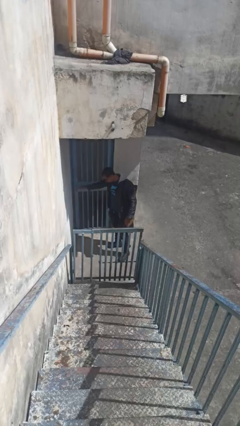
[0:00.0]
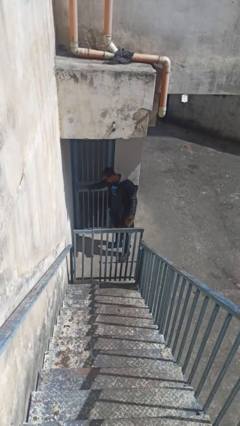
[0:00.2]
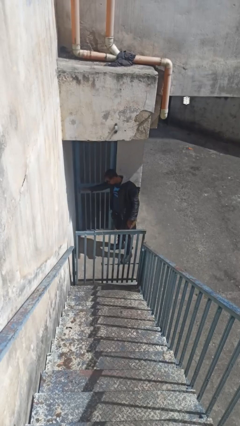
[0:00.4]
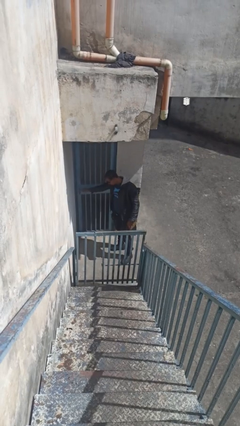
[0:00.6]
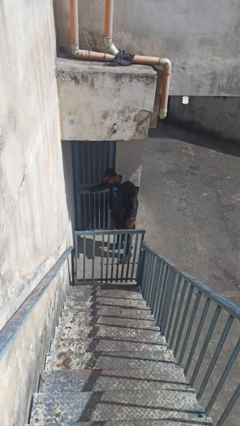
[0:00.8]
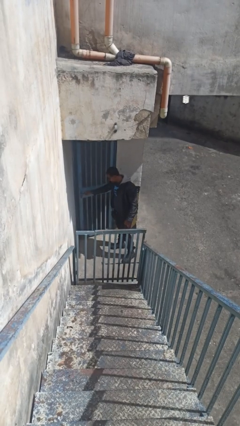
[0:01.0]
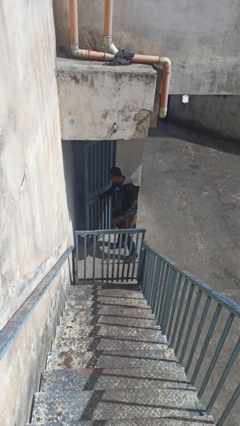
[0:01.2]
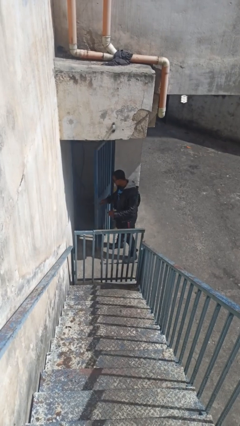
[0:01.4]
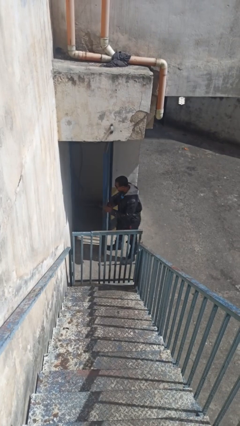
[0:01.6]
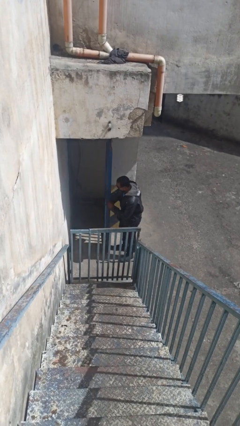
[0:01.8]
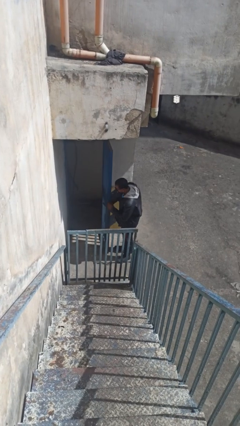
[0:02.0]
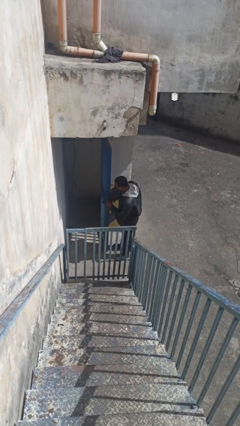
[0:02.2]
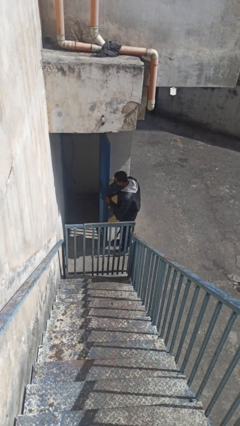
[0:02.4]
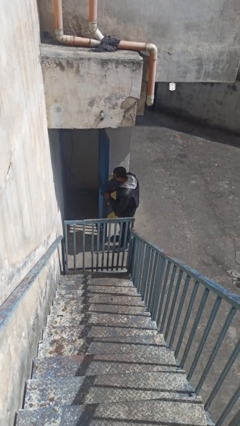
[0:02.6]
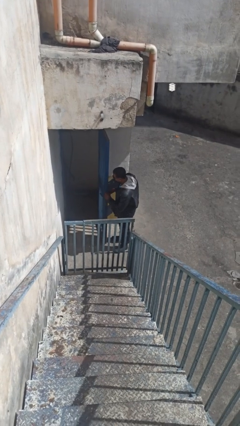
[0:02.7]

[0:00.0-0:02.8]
person opens facility door

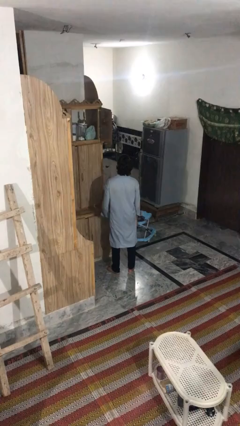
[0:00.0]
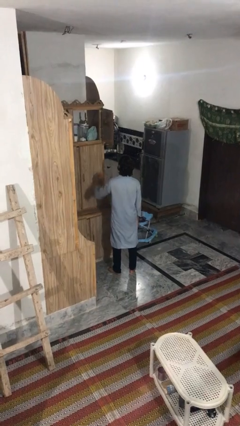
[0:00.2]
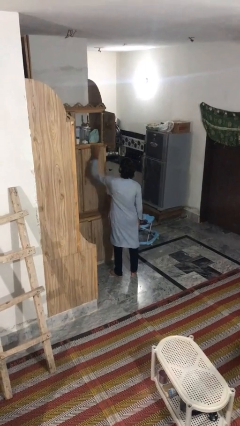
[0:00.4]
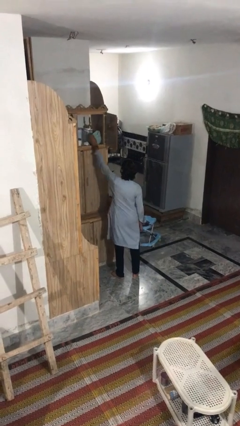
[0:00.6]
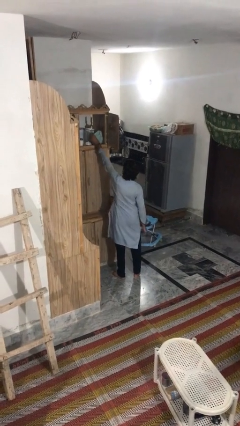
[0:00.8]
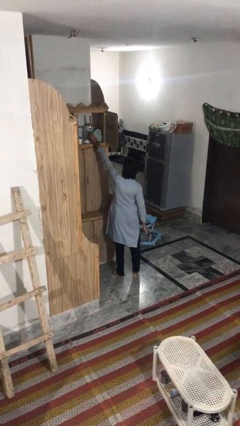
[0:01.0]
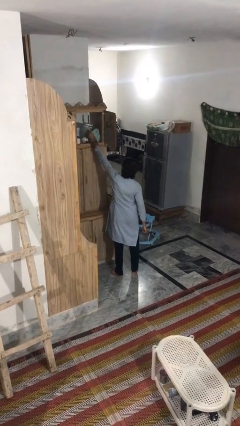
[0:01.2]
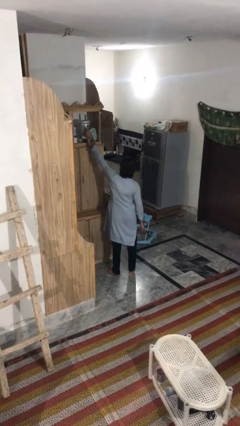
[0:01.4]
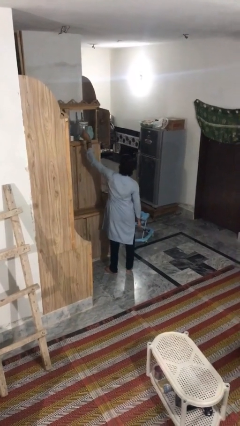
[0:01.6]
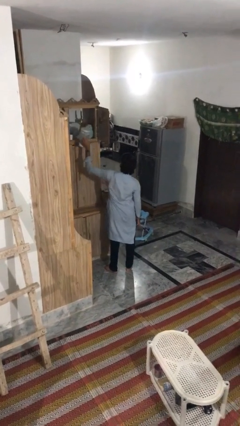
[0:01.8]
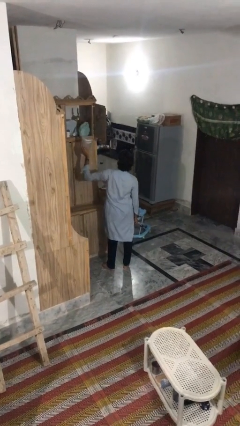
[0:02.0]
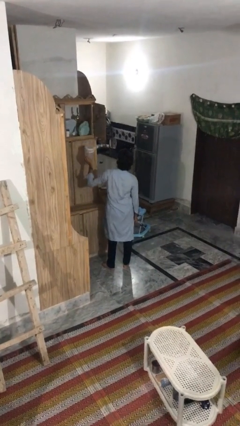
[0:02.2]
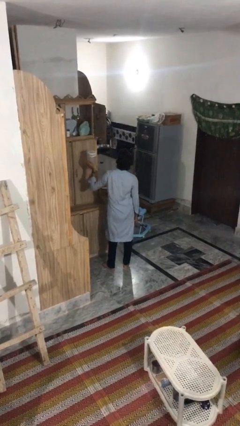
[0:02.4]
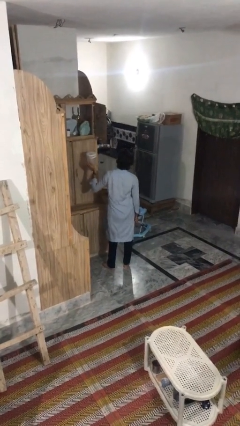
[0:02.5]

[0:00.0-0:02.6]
person picks up object from shelf

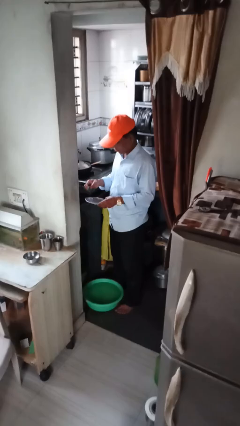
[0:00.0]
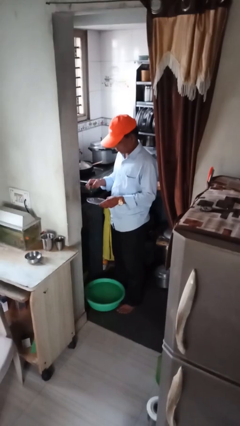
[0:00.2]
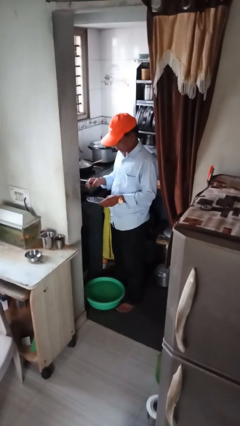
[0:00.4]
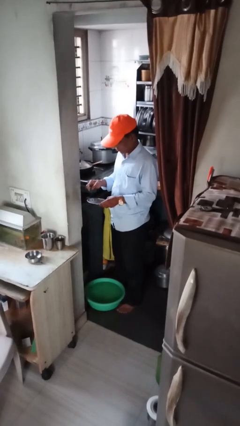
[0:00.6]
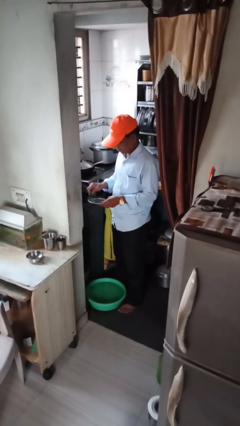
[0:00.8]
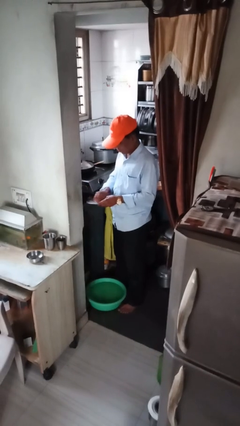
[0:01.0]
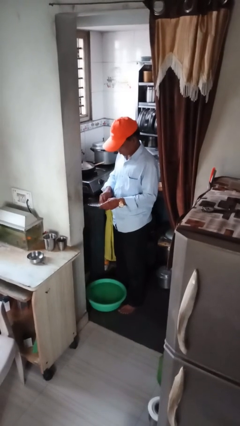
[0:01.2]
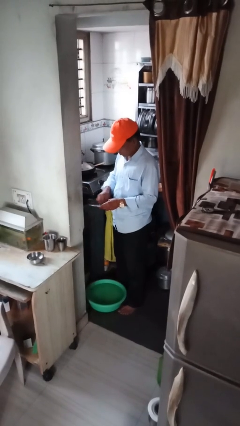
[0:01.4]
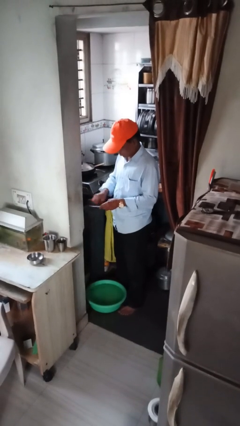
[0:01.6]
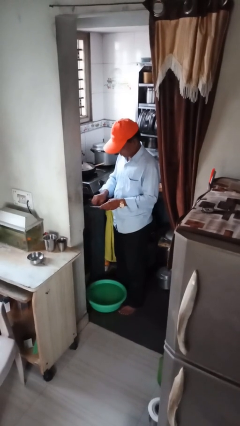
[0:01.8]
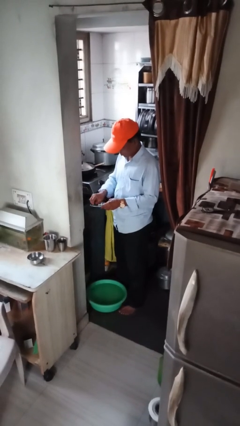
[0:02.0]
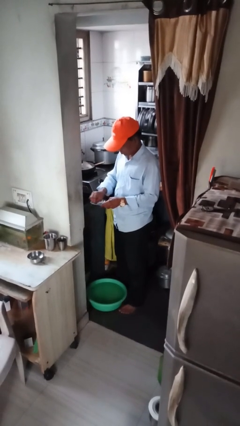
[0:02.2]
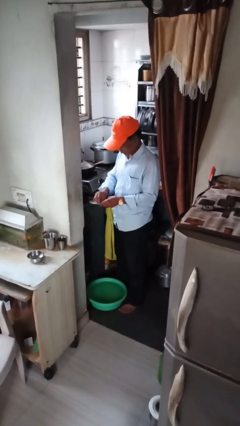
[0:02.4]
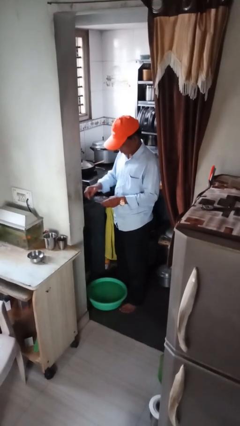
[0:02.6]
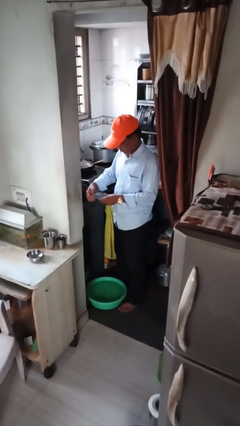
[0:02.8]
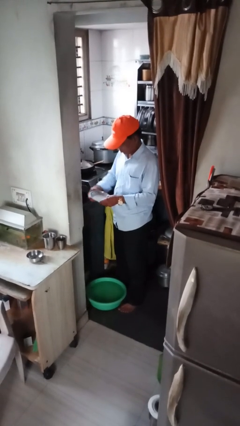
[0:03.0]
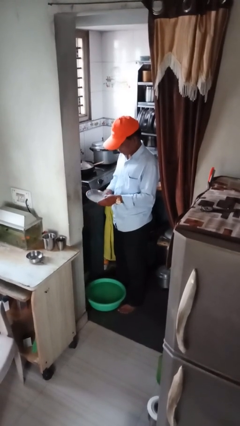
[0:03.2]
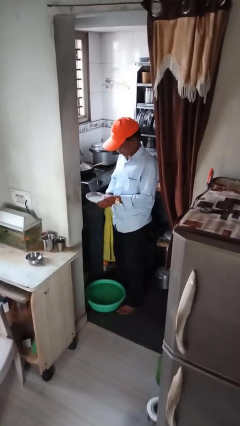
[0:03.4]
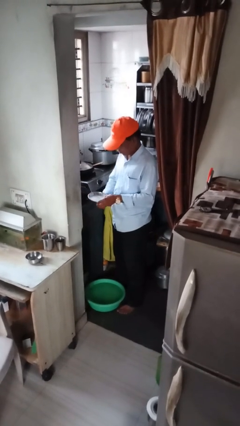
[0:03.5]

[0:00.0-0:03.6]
person washes dish

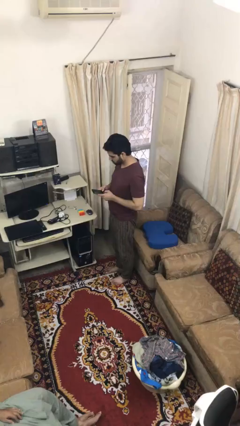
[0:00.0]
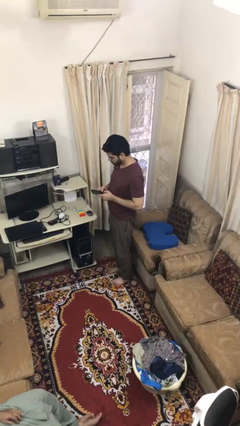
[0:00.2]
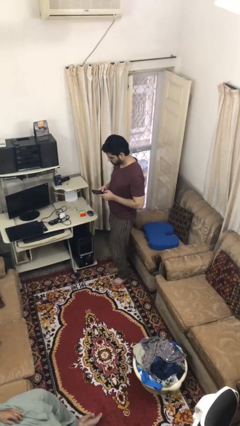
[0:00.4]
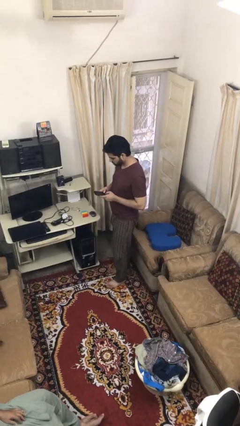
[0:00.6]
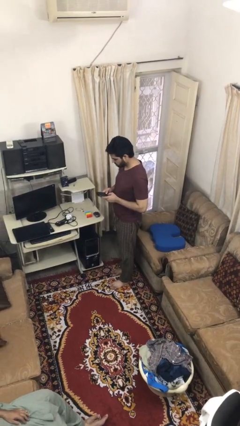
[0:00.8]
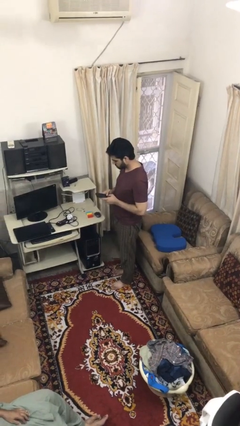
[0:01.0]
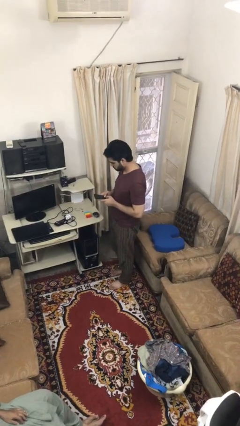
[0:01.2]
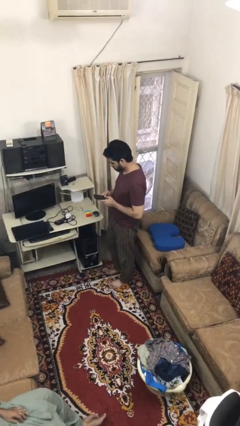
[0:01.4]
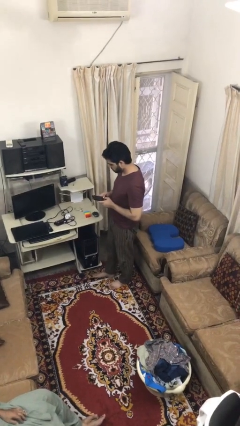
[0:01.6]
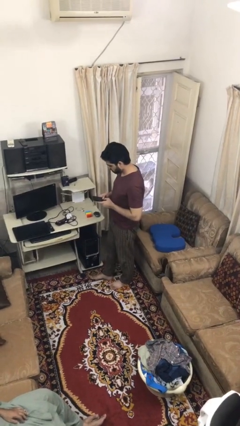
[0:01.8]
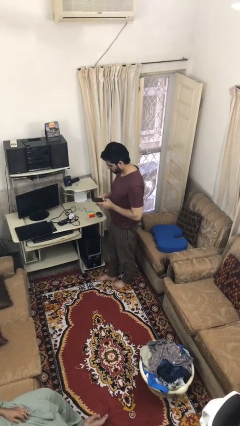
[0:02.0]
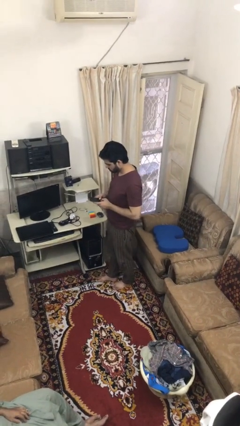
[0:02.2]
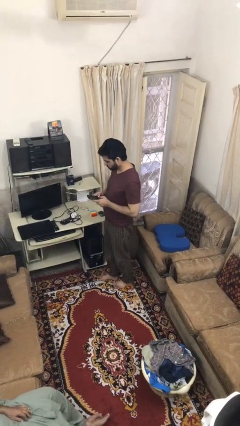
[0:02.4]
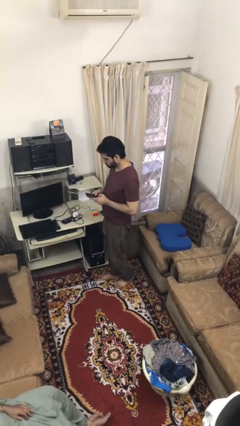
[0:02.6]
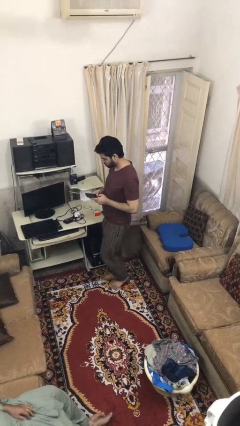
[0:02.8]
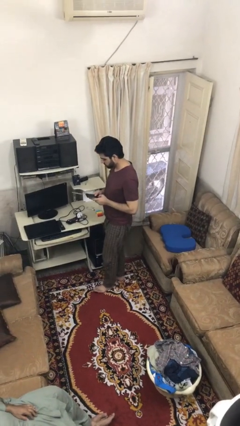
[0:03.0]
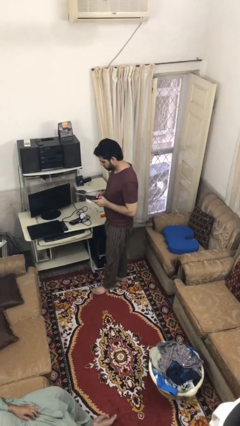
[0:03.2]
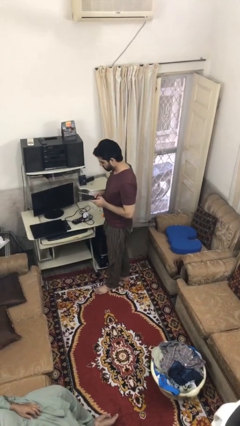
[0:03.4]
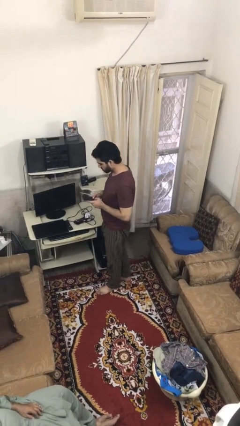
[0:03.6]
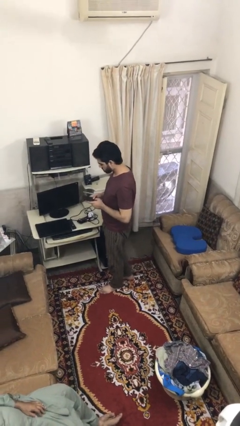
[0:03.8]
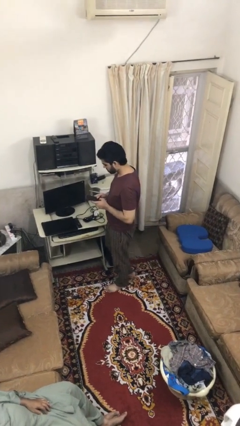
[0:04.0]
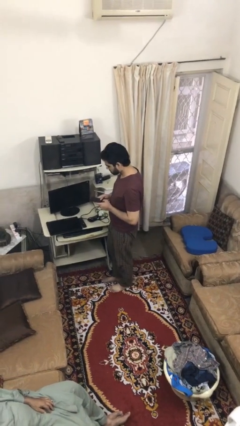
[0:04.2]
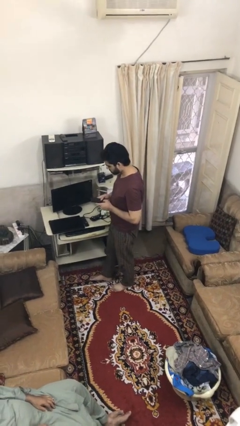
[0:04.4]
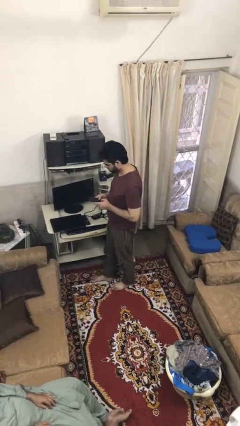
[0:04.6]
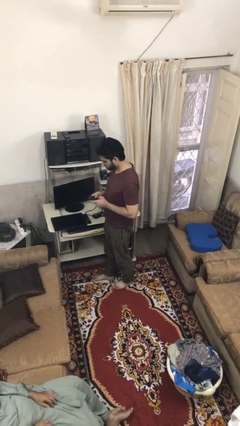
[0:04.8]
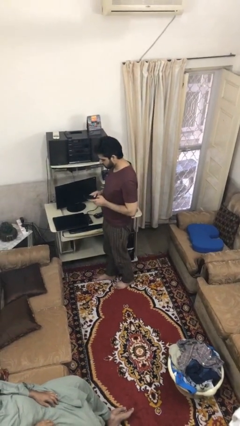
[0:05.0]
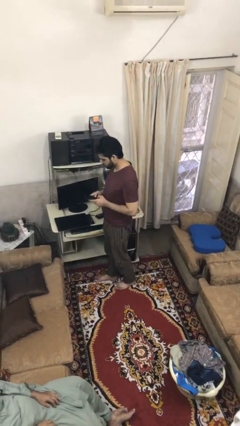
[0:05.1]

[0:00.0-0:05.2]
person texts on phone

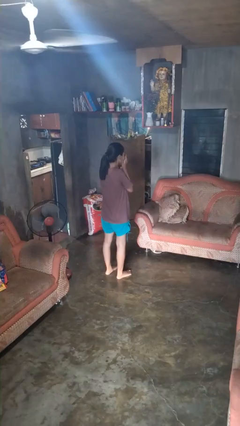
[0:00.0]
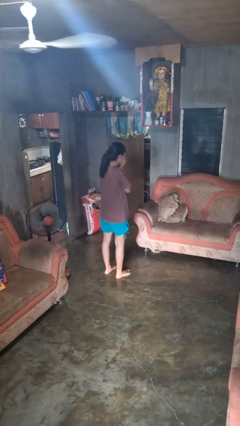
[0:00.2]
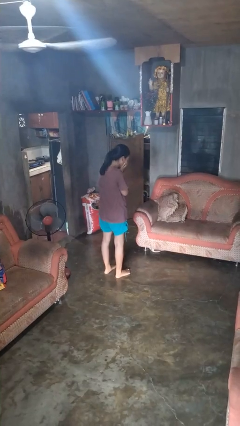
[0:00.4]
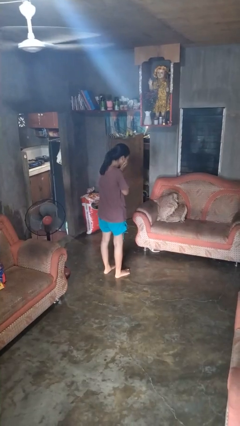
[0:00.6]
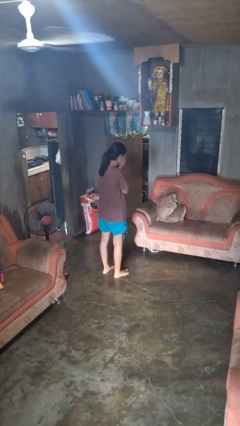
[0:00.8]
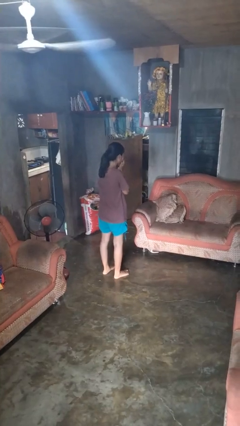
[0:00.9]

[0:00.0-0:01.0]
person sneezes into hand

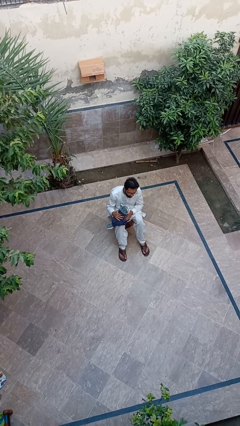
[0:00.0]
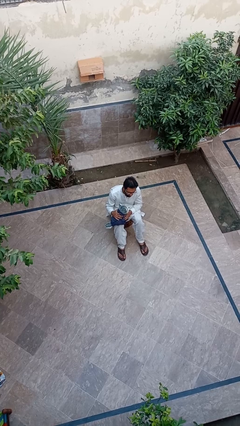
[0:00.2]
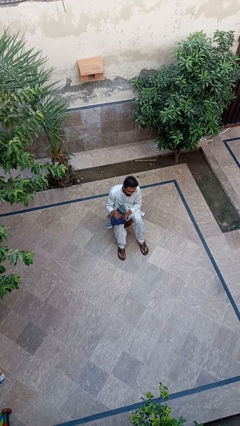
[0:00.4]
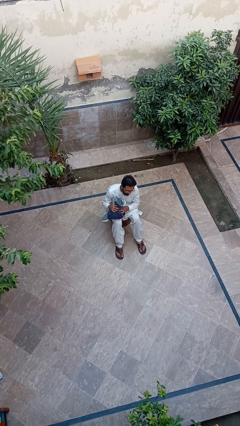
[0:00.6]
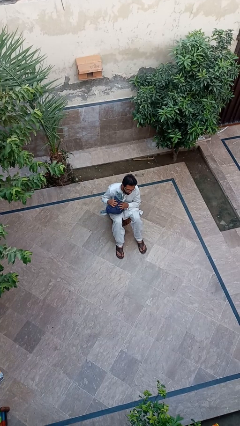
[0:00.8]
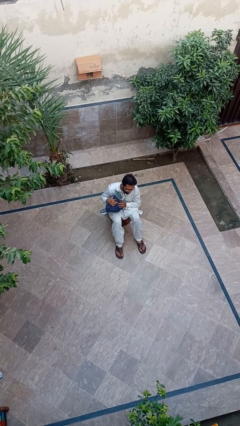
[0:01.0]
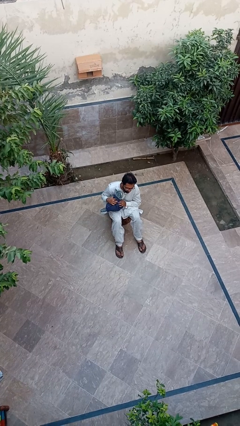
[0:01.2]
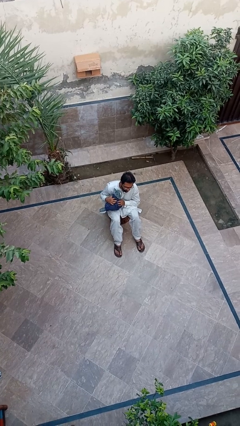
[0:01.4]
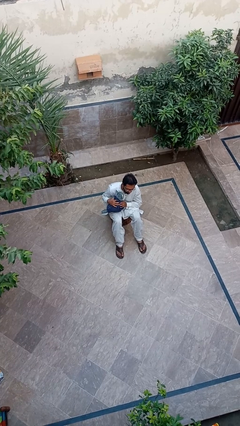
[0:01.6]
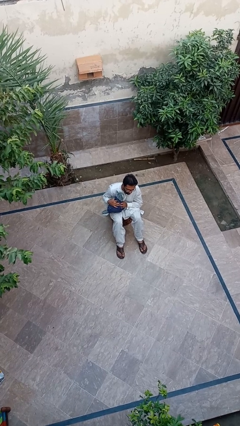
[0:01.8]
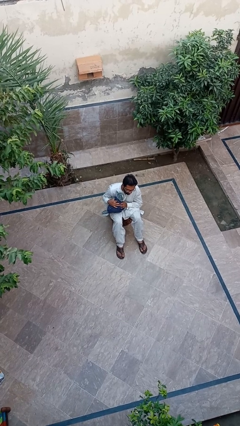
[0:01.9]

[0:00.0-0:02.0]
person hugs cat
